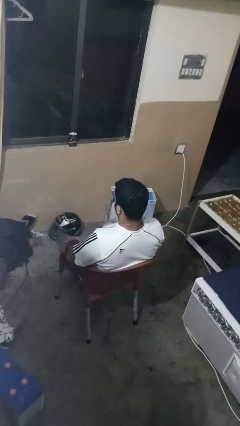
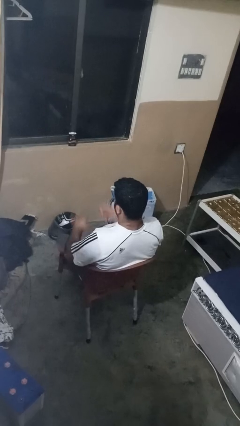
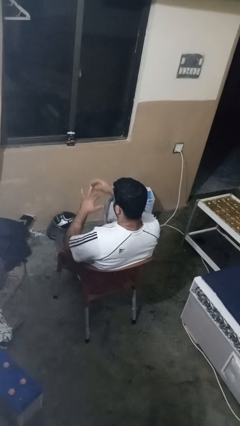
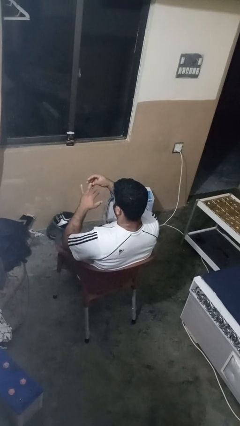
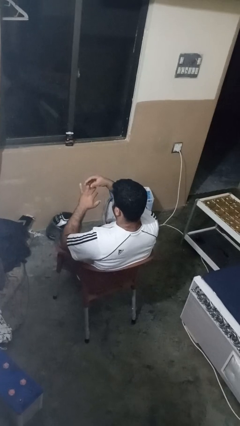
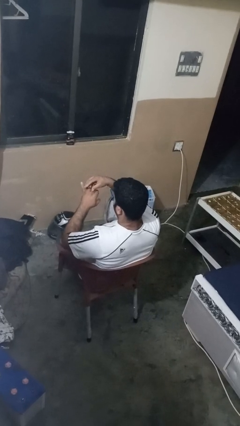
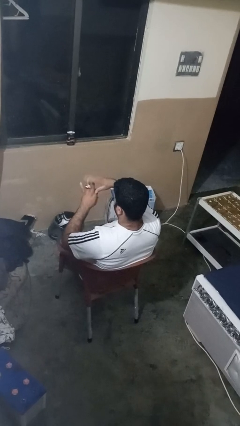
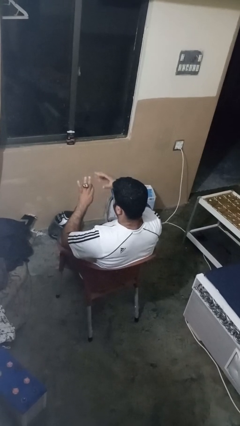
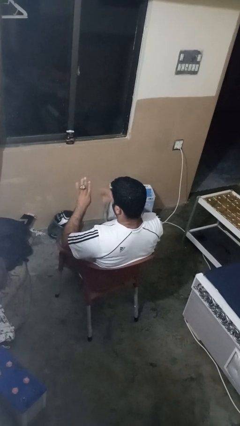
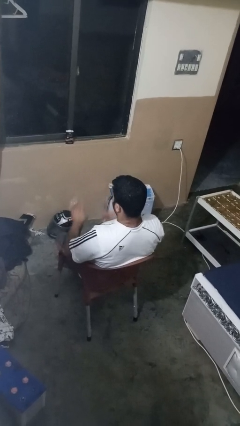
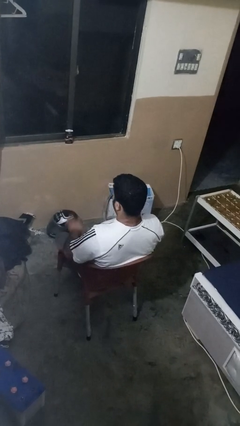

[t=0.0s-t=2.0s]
person puts on ring

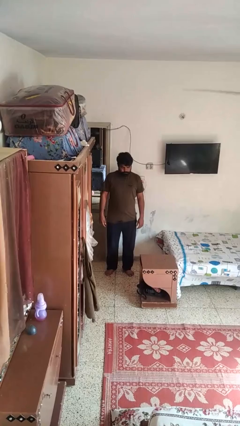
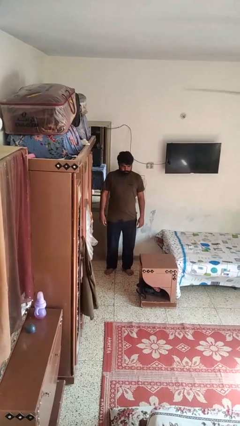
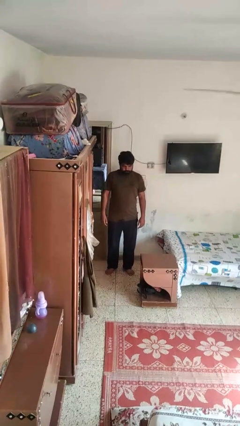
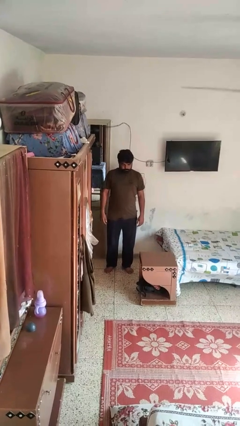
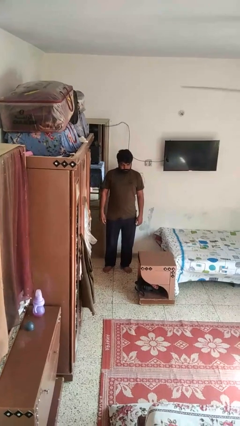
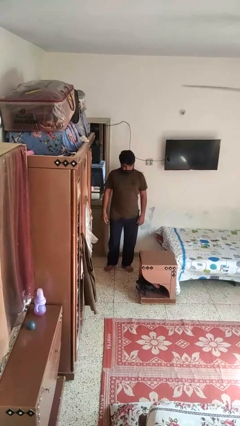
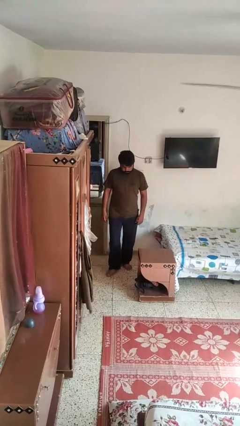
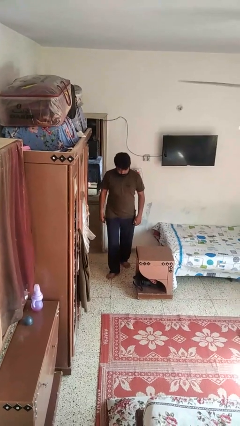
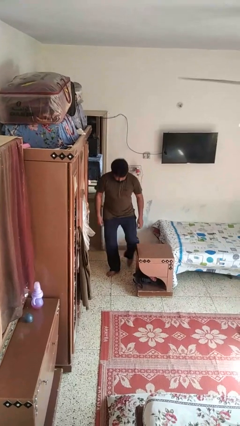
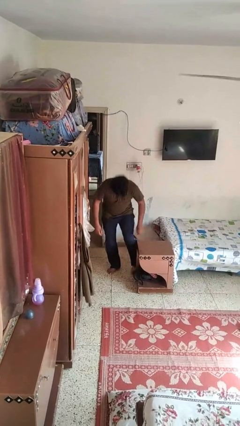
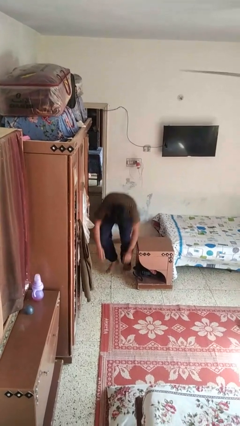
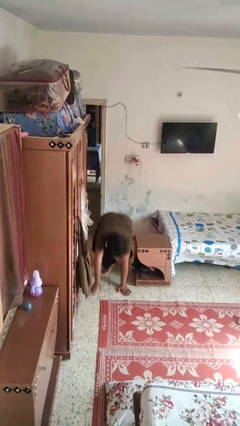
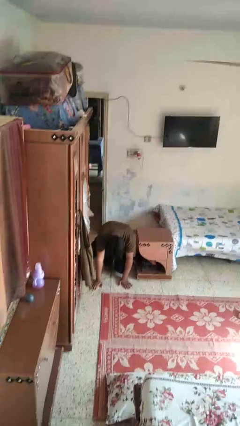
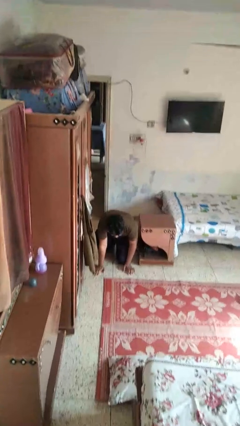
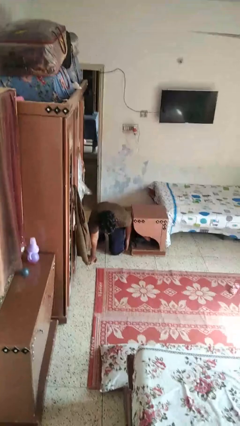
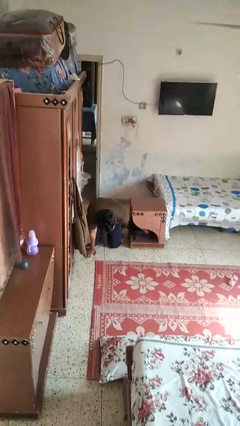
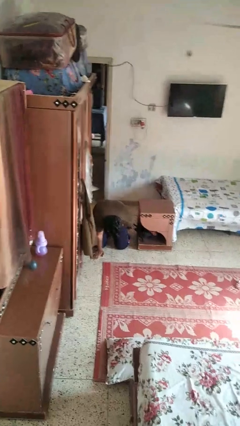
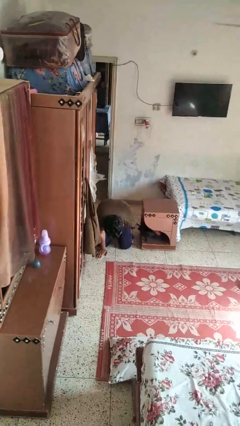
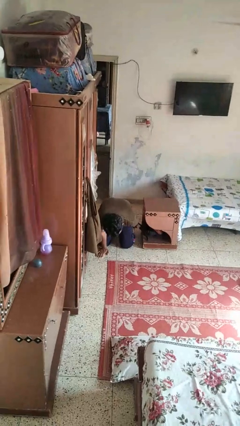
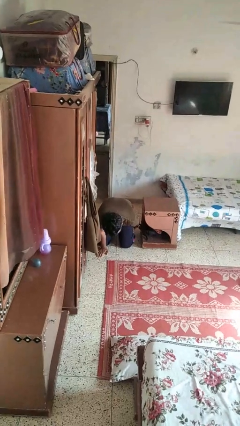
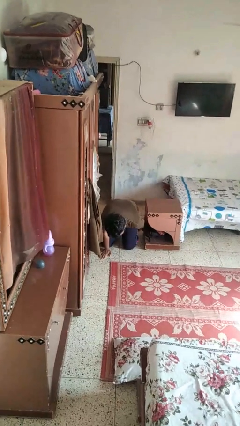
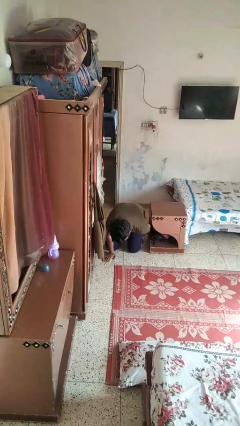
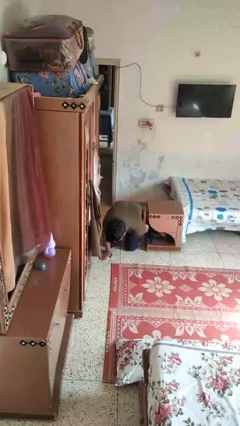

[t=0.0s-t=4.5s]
person trips on object on floor

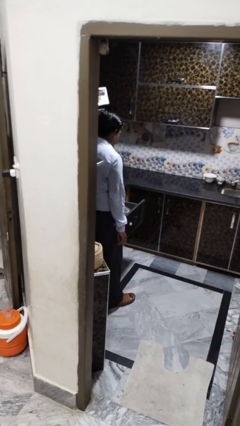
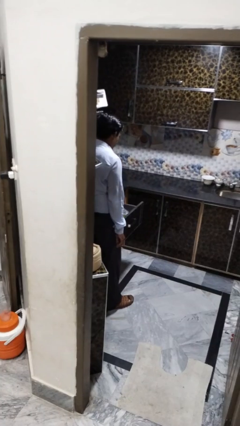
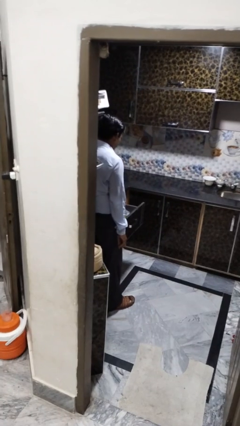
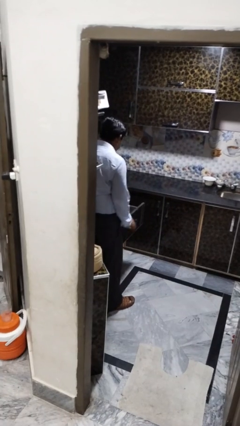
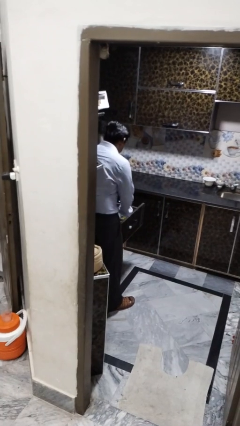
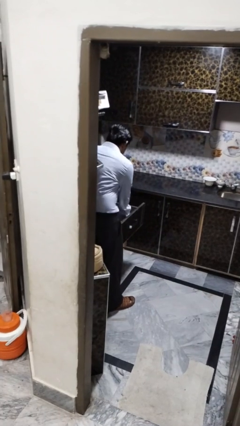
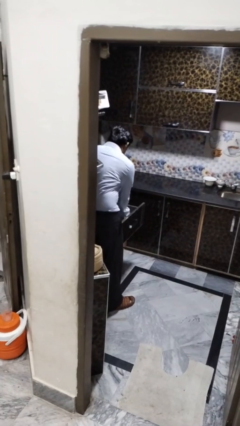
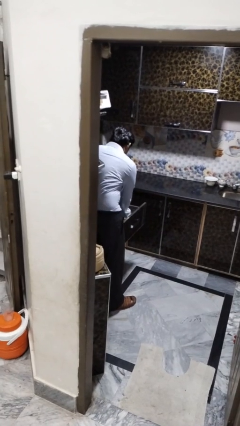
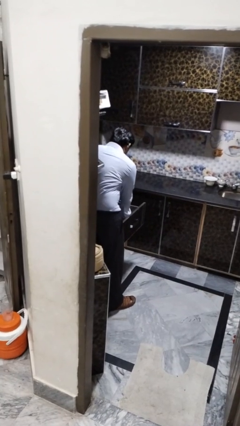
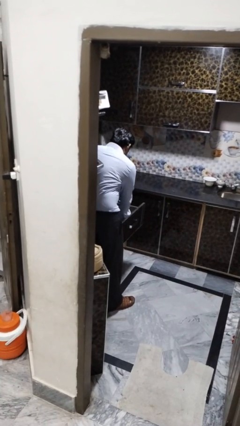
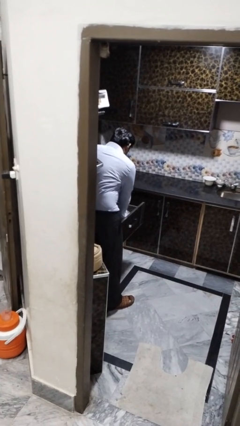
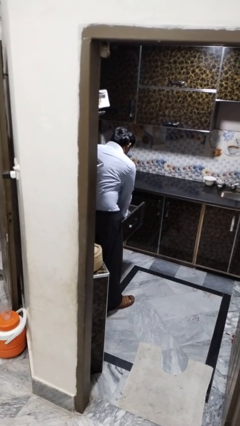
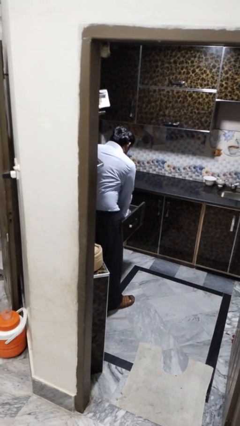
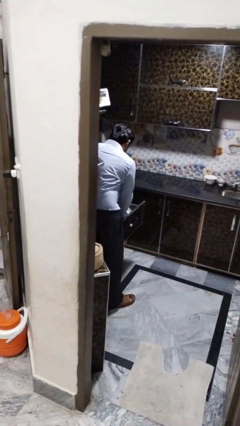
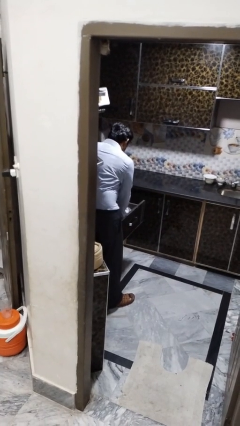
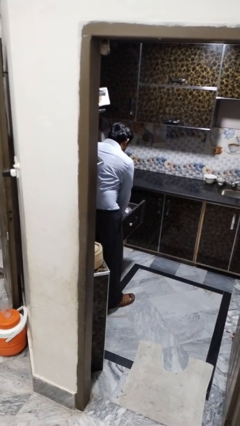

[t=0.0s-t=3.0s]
person searches in kitchen drawer

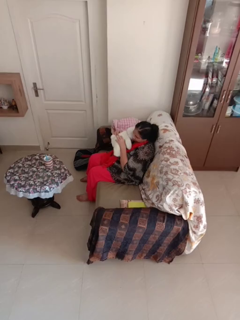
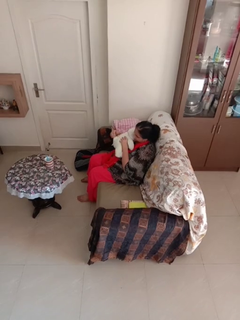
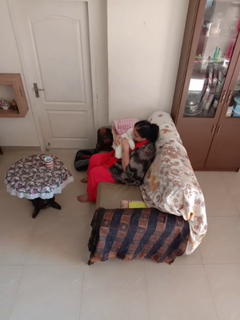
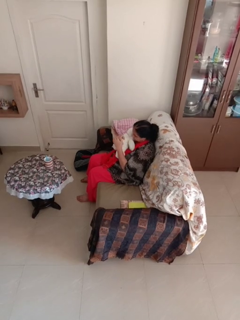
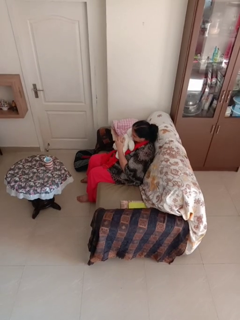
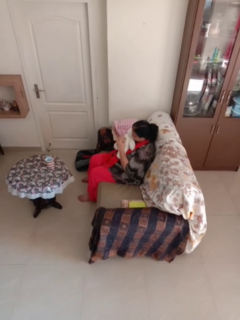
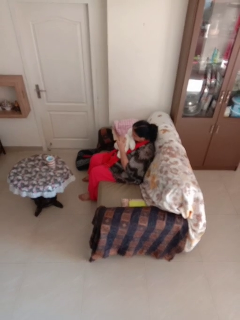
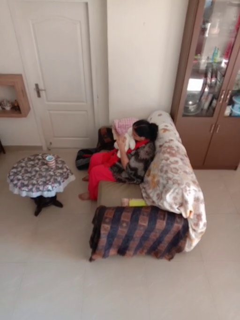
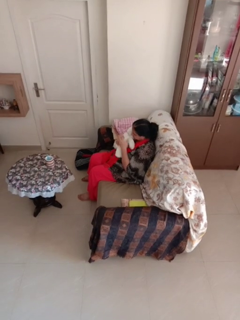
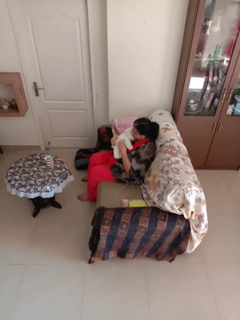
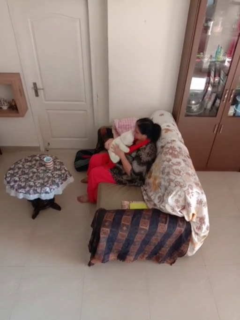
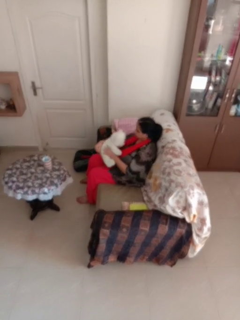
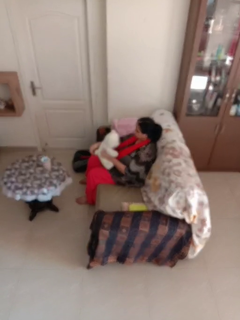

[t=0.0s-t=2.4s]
person hugs stuffed animal

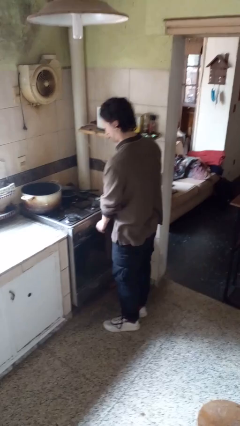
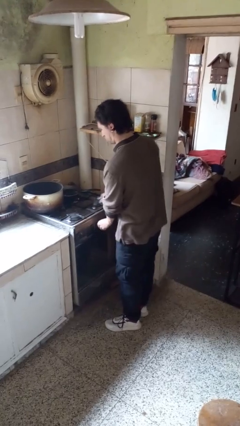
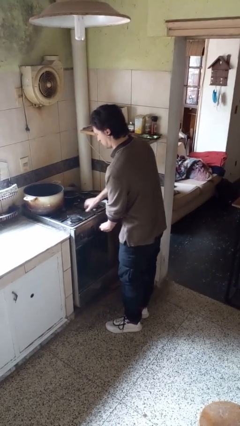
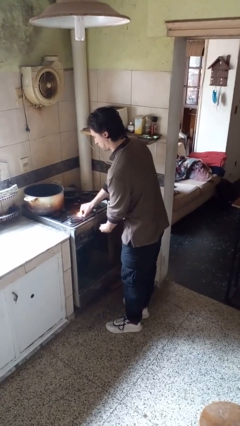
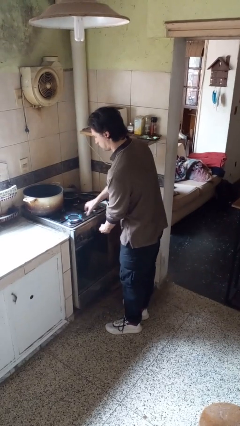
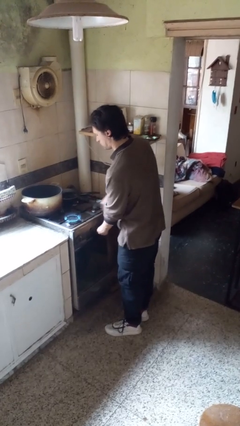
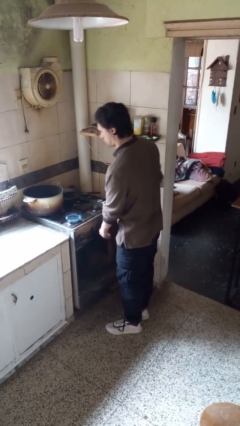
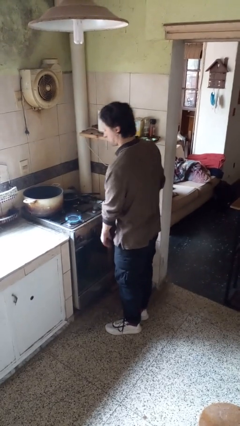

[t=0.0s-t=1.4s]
person turns on stovetop

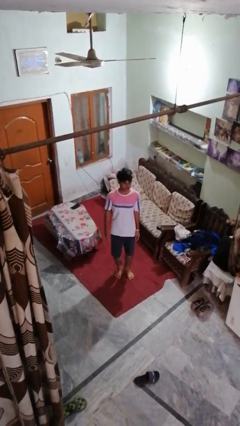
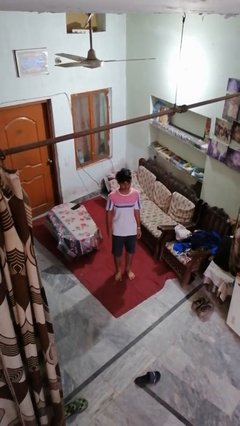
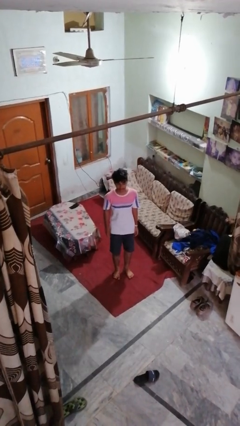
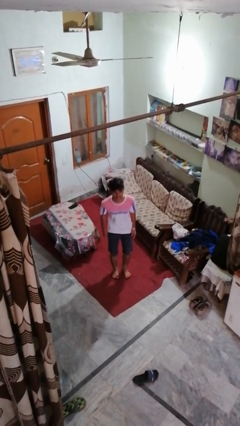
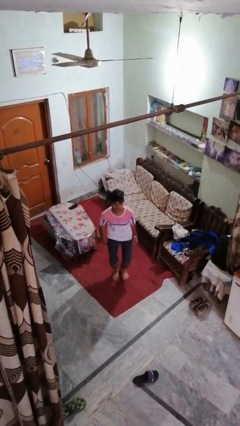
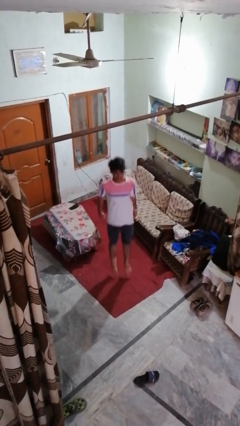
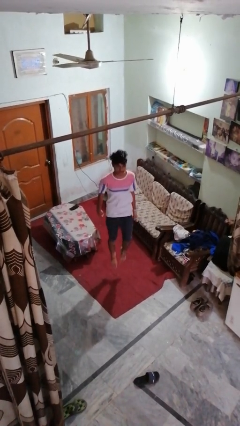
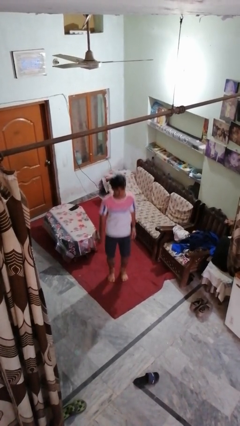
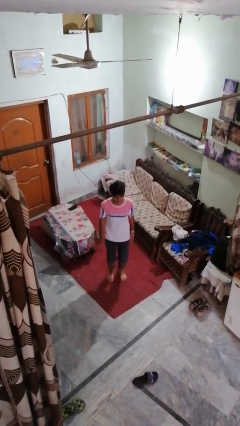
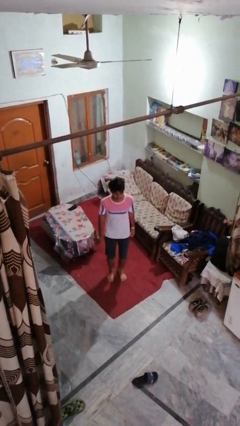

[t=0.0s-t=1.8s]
person jumps

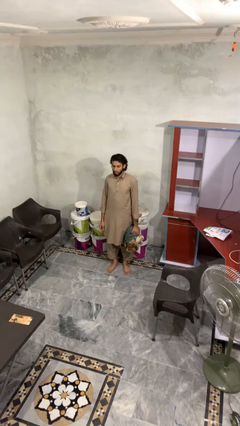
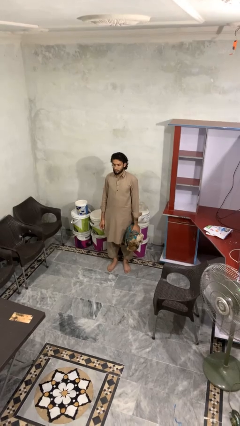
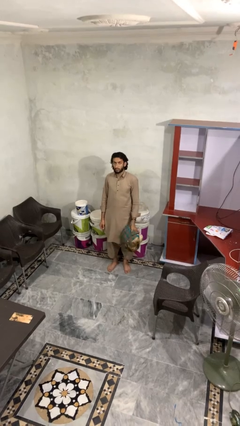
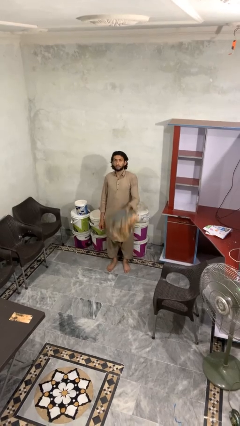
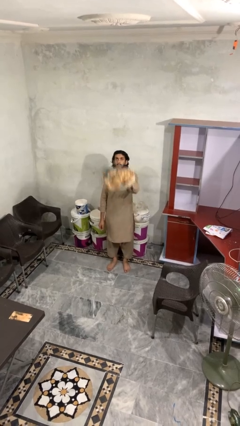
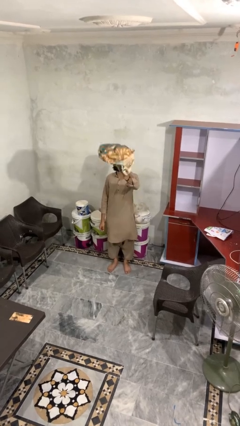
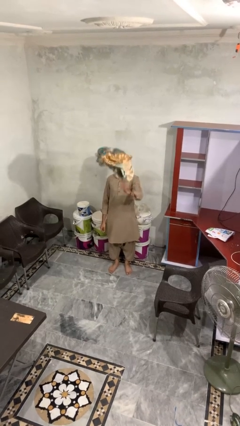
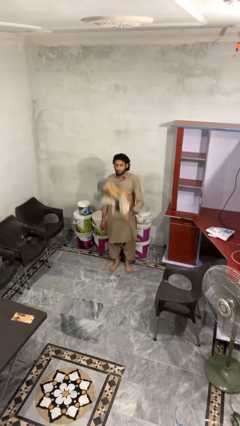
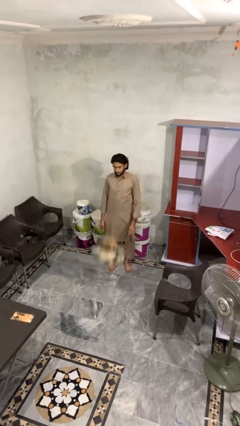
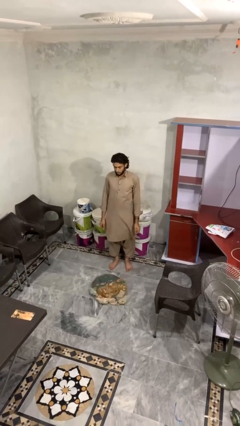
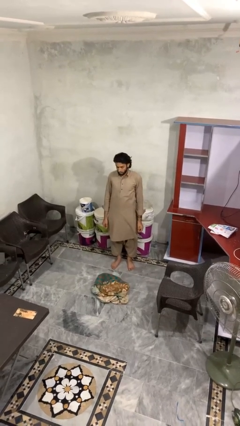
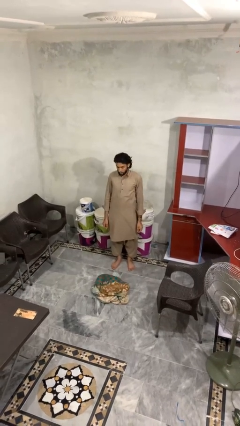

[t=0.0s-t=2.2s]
person throws object into air

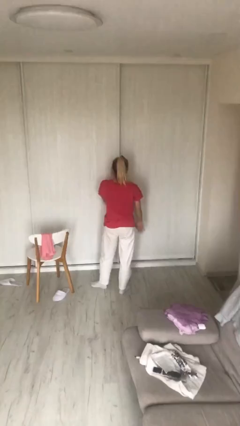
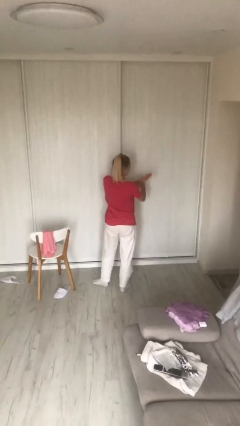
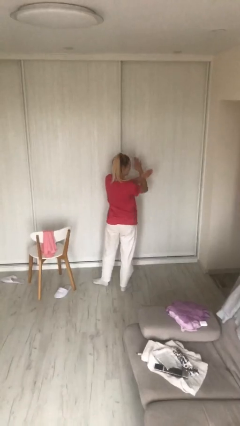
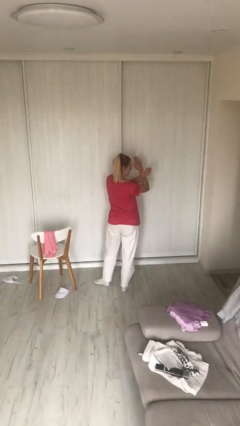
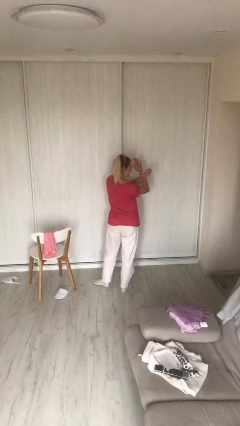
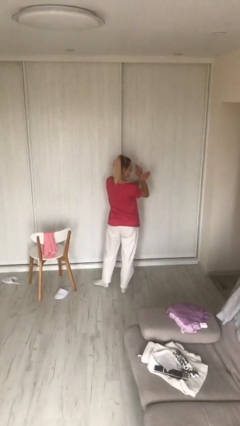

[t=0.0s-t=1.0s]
person gestures arms x
